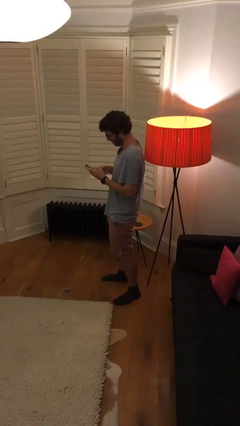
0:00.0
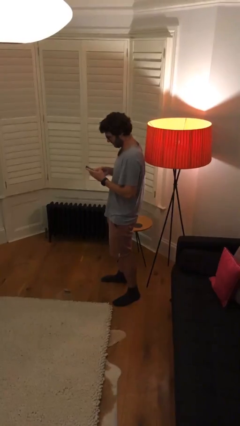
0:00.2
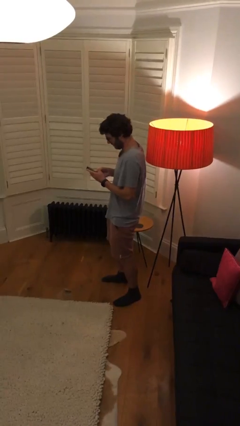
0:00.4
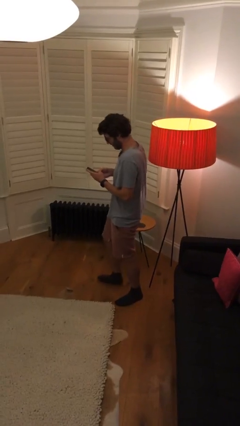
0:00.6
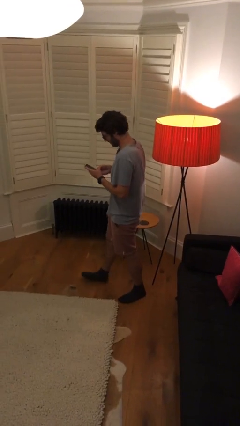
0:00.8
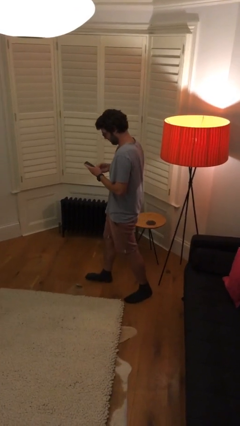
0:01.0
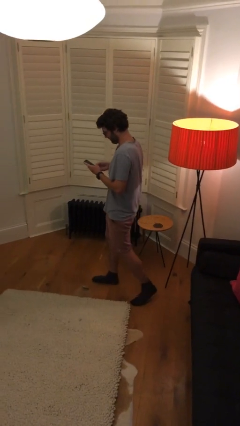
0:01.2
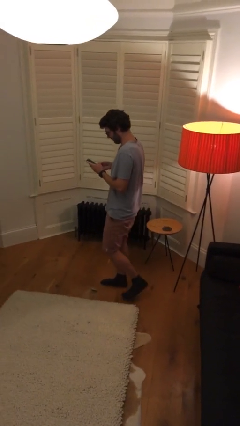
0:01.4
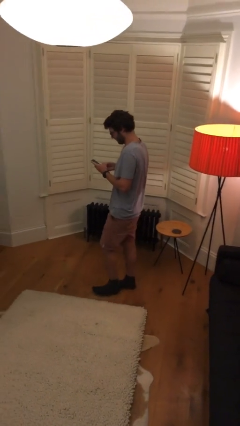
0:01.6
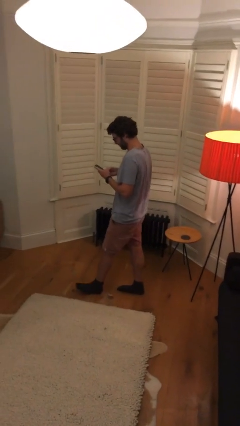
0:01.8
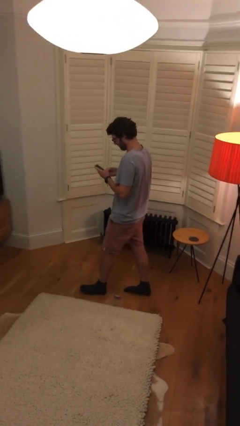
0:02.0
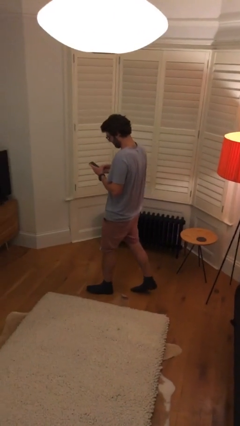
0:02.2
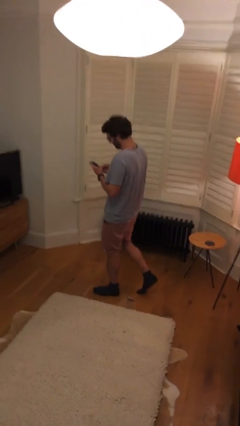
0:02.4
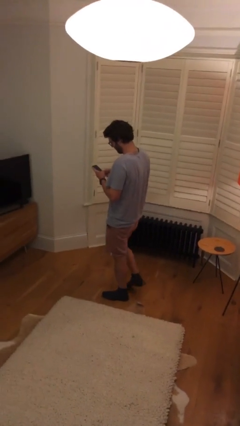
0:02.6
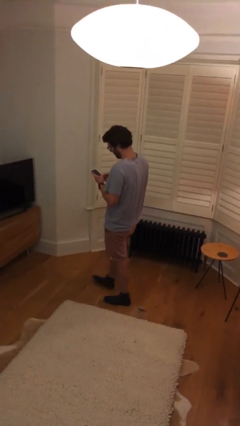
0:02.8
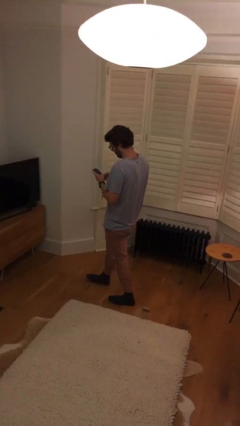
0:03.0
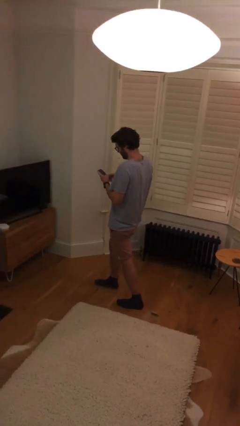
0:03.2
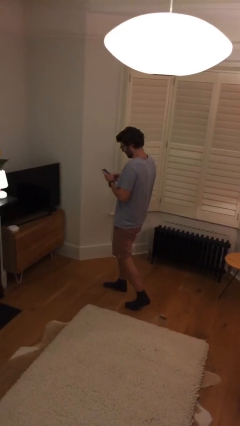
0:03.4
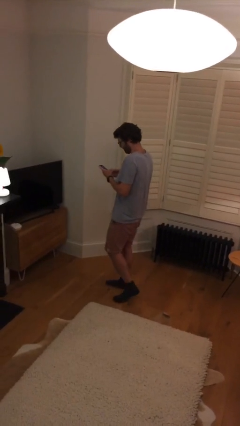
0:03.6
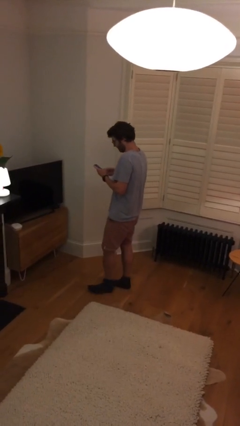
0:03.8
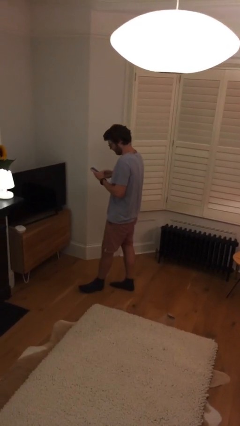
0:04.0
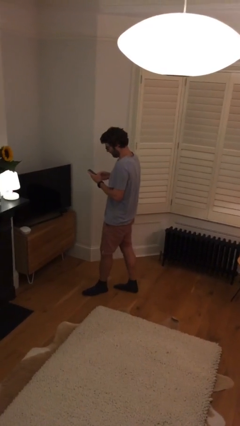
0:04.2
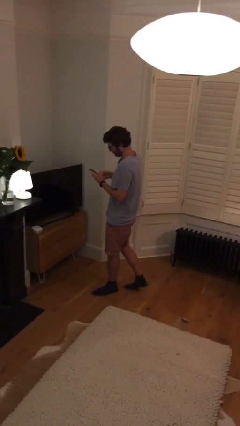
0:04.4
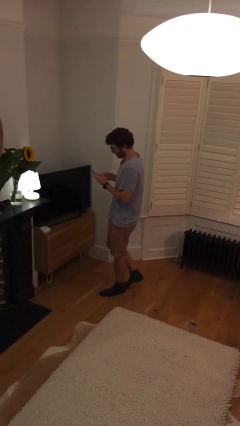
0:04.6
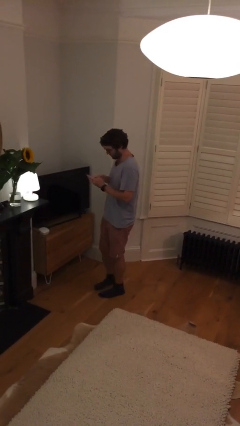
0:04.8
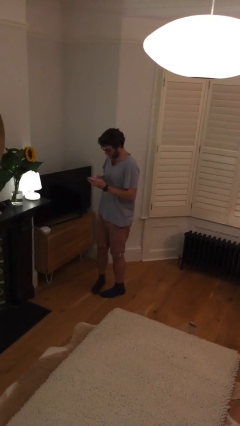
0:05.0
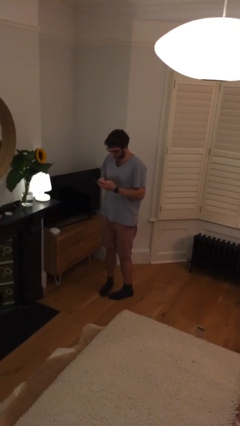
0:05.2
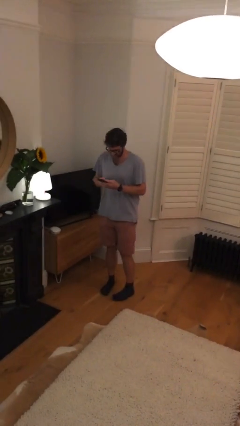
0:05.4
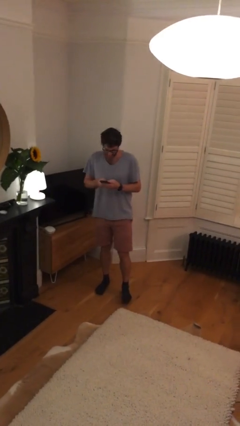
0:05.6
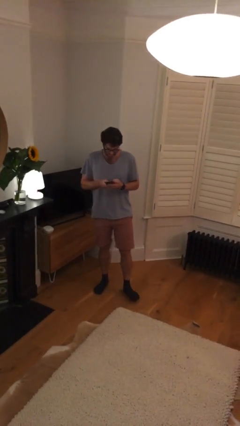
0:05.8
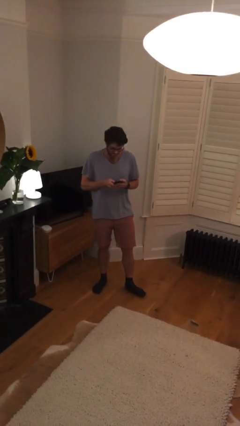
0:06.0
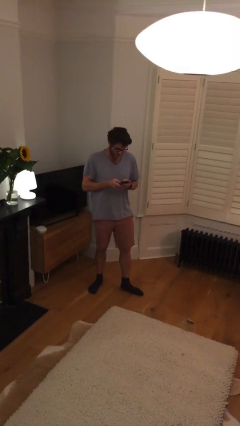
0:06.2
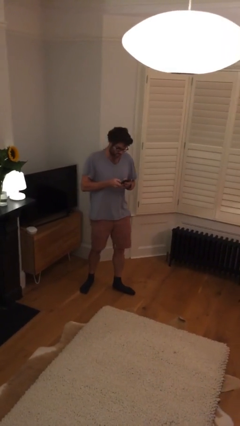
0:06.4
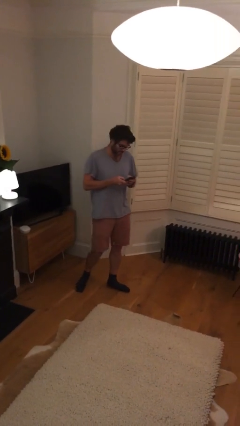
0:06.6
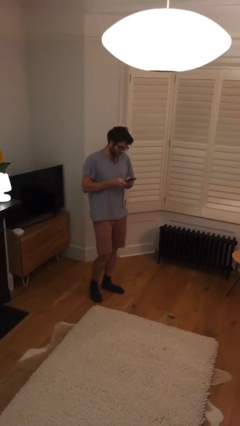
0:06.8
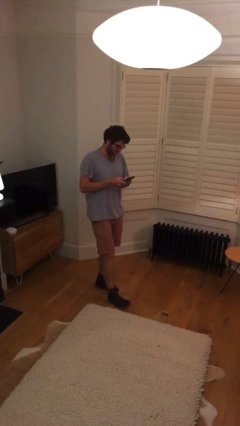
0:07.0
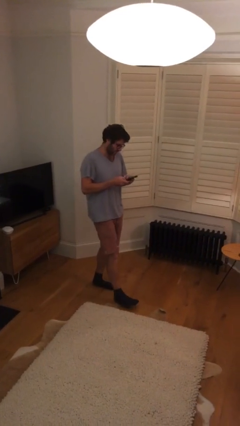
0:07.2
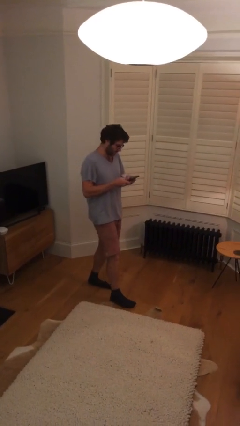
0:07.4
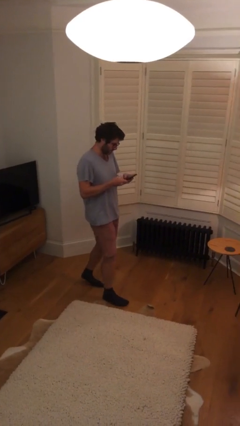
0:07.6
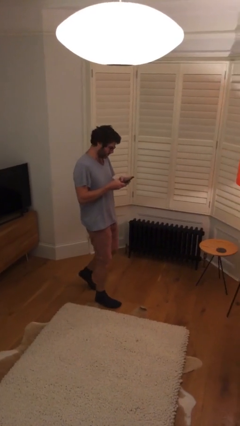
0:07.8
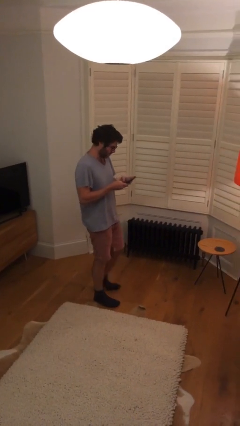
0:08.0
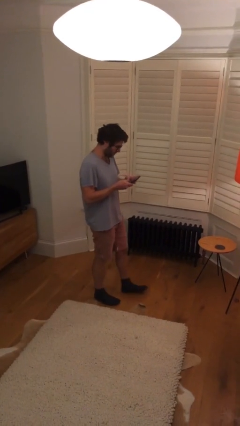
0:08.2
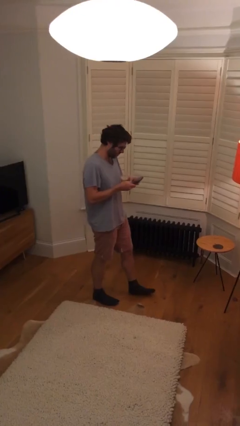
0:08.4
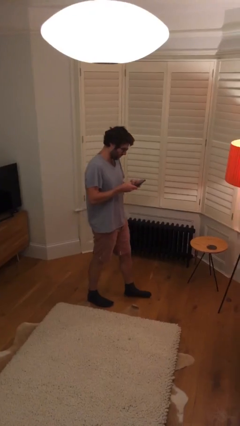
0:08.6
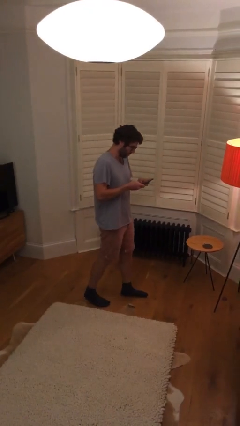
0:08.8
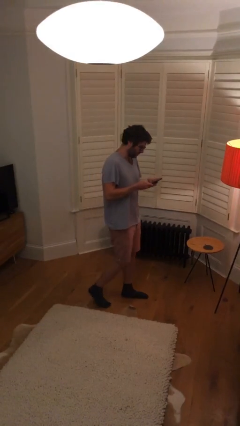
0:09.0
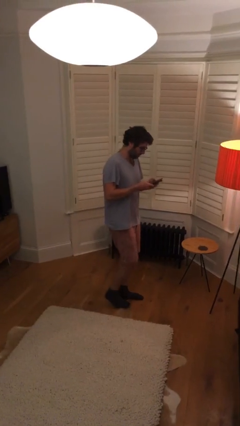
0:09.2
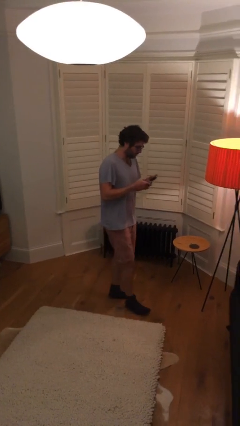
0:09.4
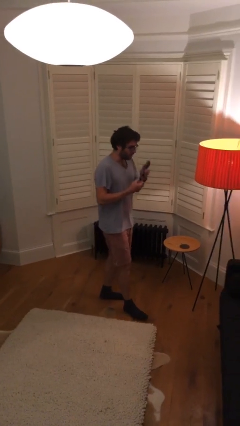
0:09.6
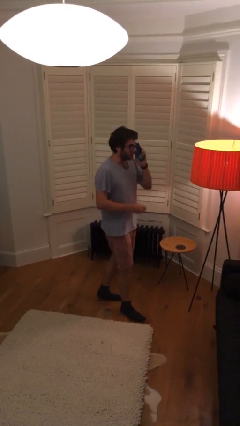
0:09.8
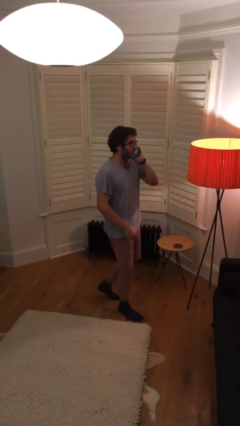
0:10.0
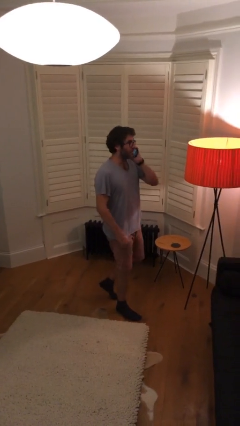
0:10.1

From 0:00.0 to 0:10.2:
person texts on phone

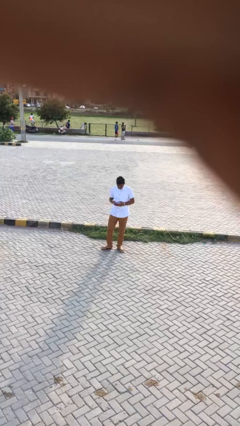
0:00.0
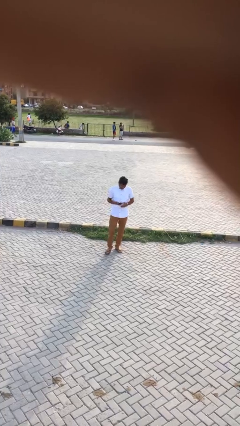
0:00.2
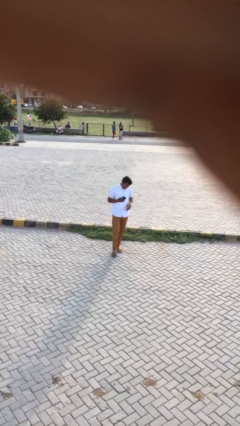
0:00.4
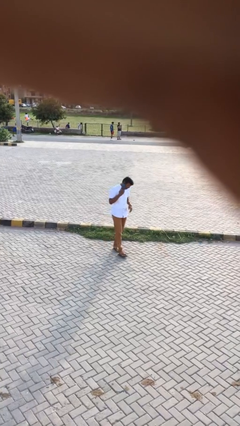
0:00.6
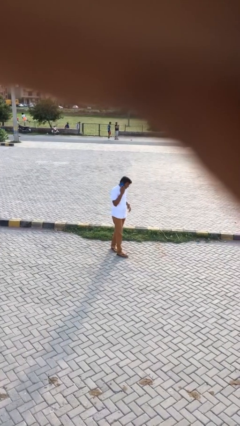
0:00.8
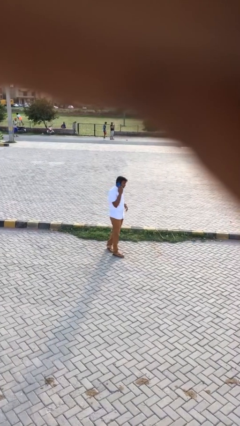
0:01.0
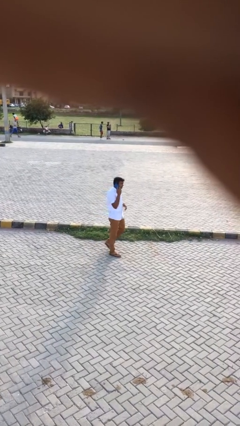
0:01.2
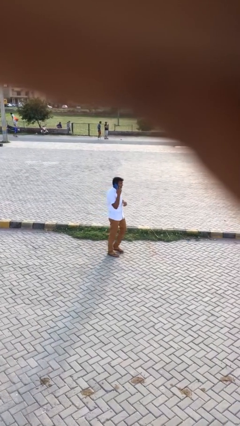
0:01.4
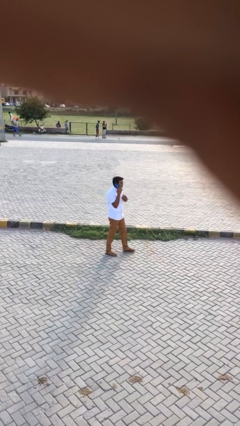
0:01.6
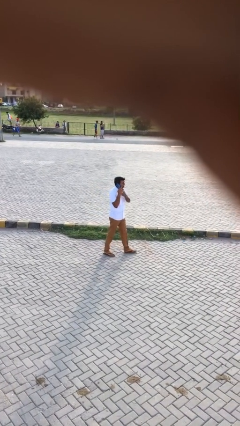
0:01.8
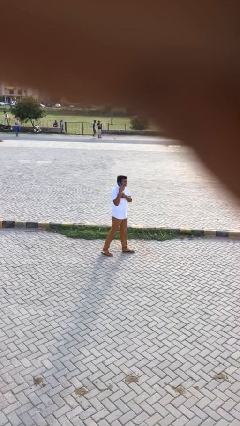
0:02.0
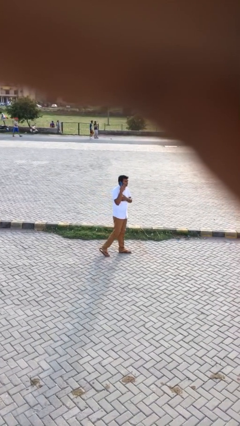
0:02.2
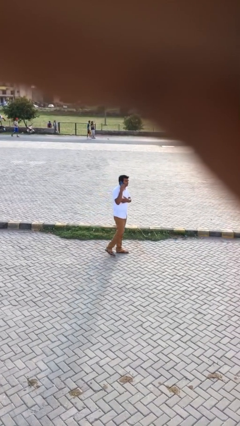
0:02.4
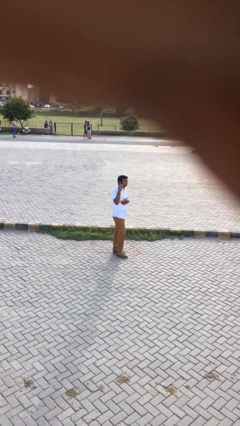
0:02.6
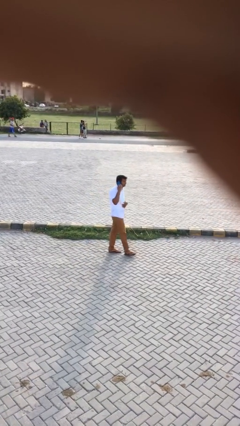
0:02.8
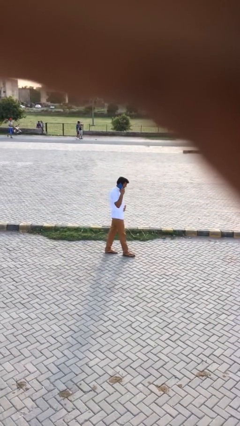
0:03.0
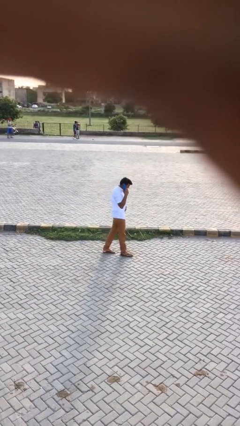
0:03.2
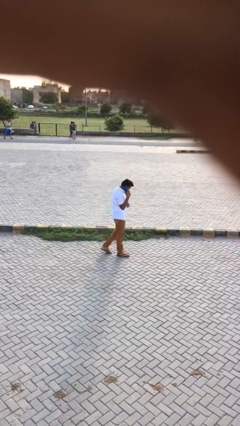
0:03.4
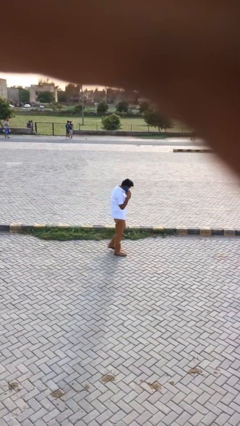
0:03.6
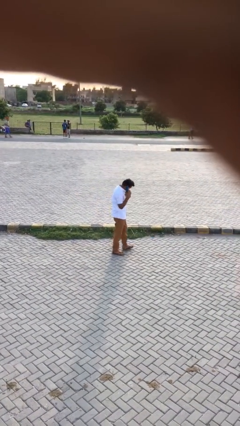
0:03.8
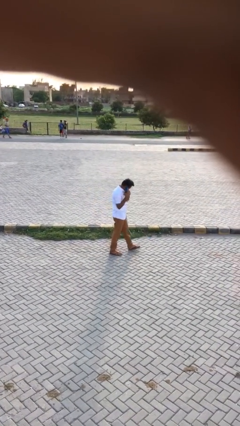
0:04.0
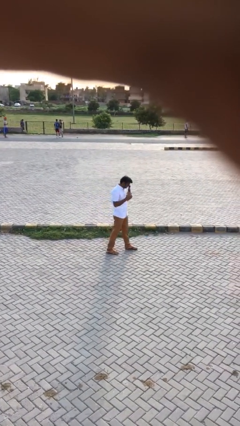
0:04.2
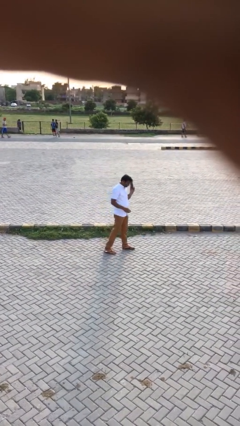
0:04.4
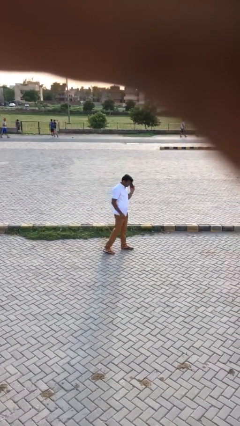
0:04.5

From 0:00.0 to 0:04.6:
person talks on phone

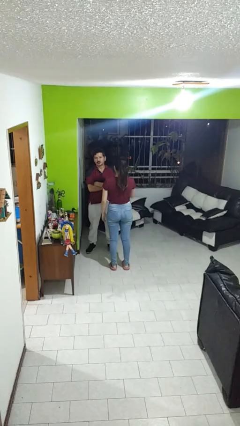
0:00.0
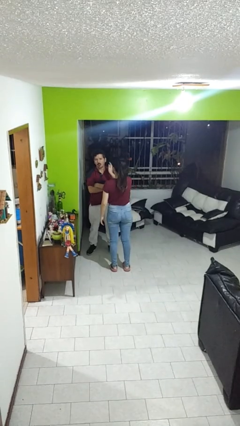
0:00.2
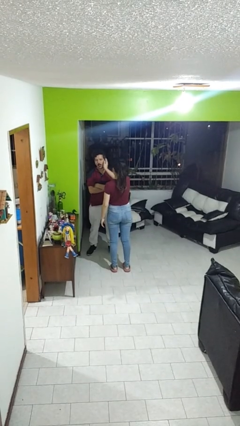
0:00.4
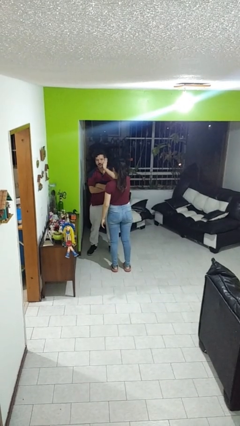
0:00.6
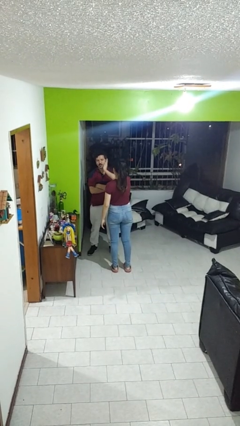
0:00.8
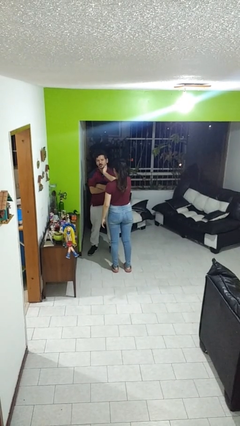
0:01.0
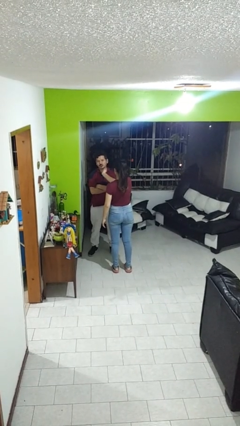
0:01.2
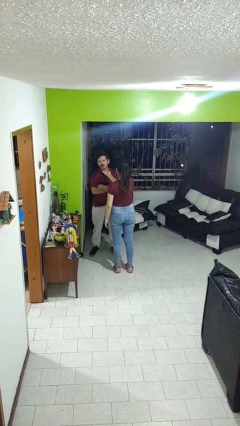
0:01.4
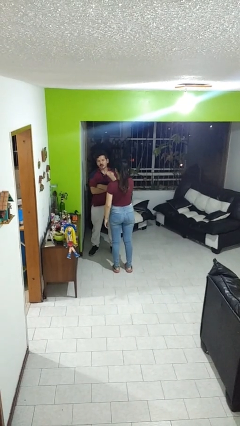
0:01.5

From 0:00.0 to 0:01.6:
person touches face of person

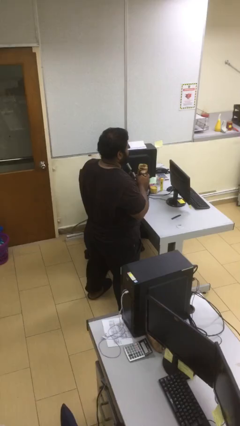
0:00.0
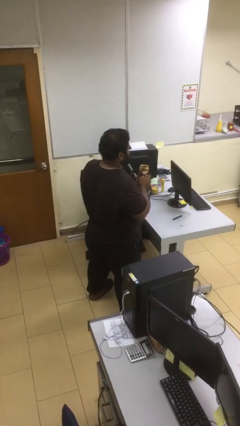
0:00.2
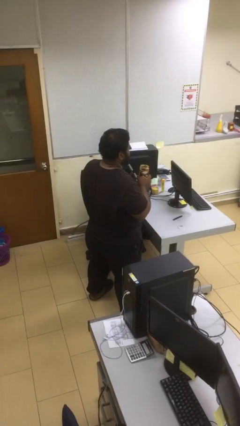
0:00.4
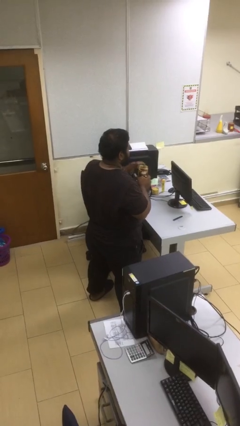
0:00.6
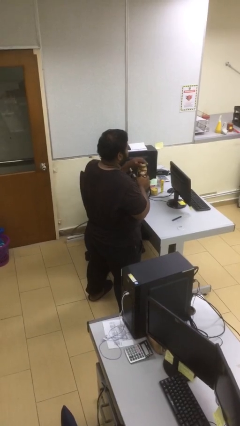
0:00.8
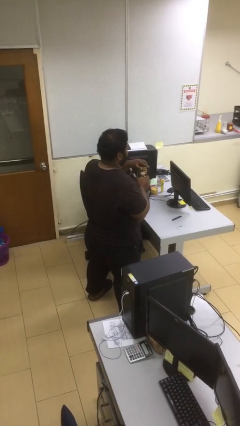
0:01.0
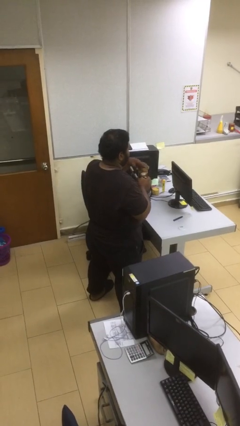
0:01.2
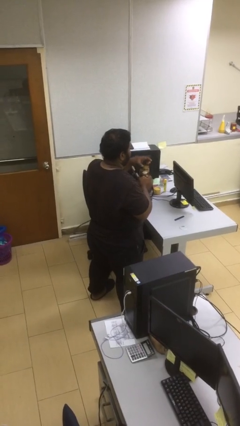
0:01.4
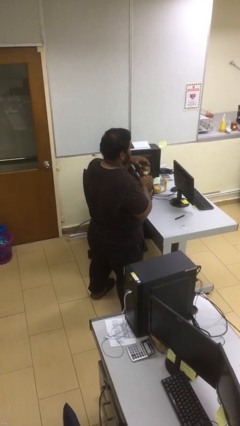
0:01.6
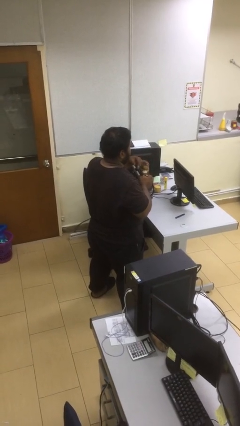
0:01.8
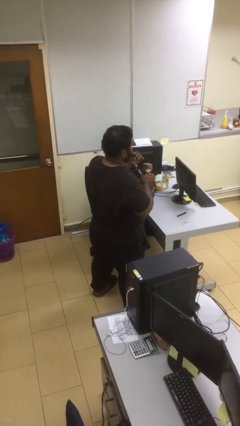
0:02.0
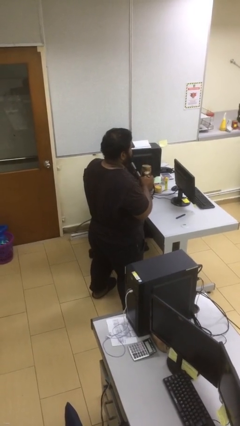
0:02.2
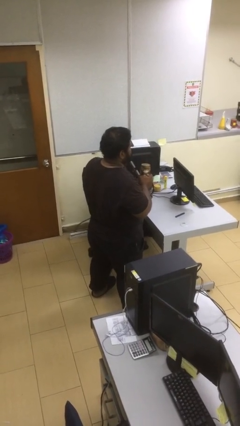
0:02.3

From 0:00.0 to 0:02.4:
person closes jar
